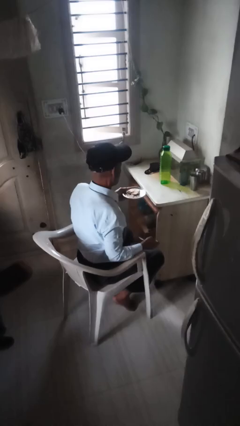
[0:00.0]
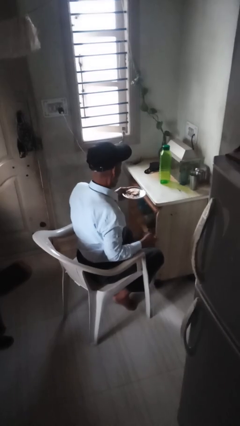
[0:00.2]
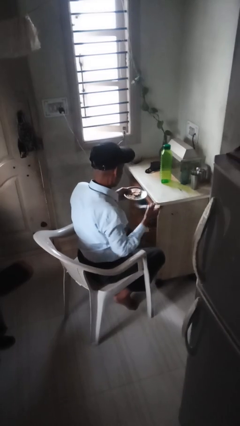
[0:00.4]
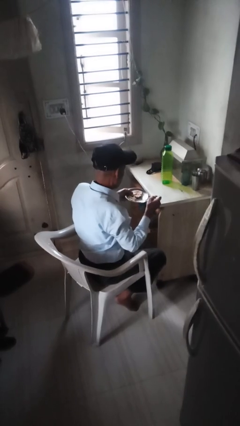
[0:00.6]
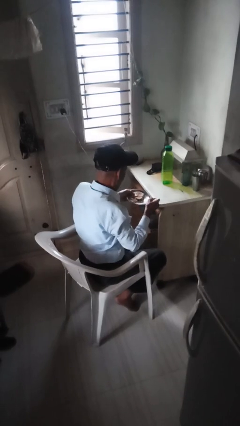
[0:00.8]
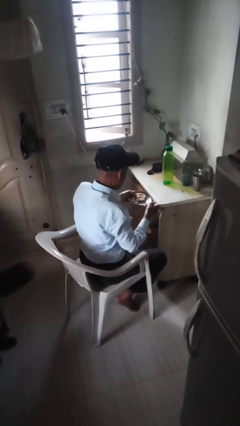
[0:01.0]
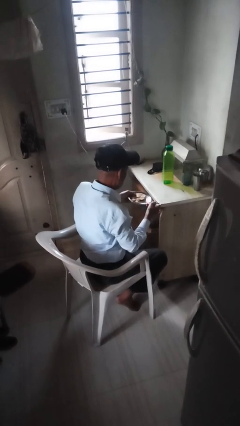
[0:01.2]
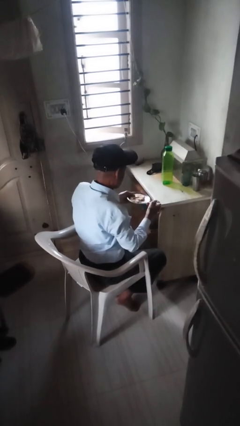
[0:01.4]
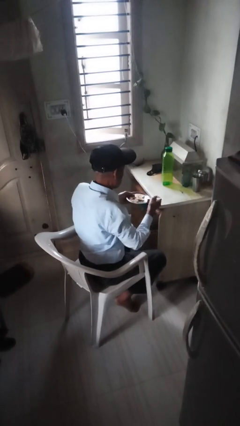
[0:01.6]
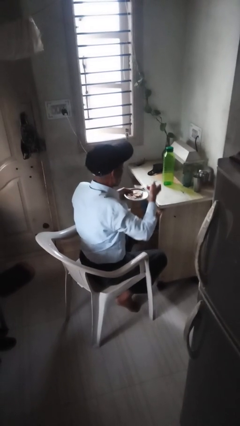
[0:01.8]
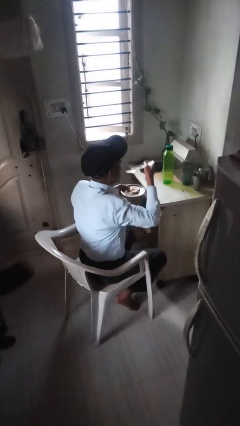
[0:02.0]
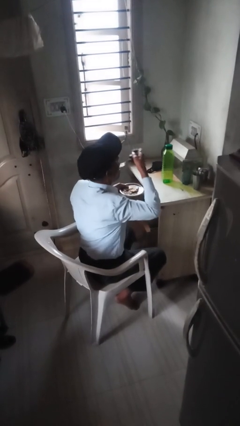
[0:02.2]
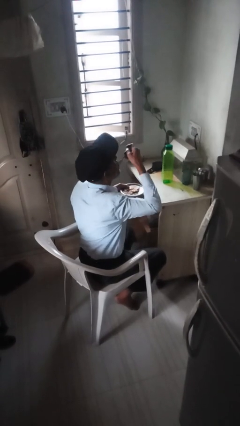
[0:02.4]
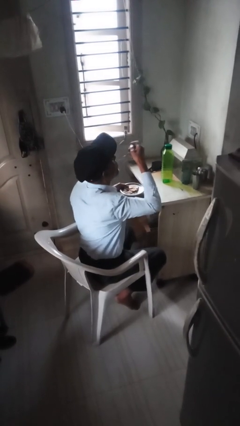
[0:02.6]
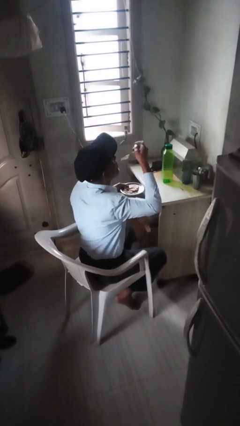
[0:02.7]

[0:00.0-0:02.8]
person eats with utensil

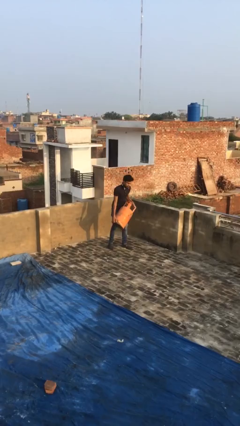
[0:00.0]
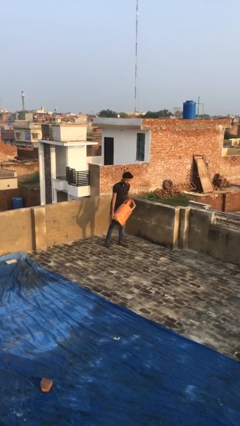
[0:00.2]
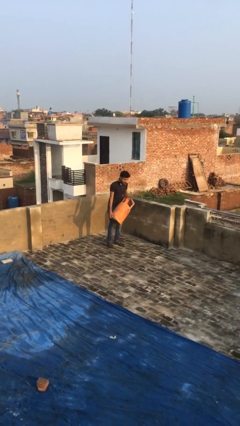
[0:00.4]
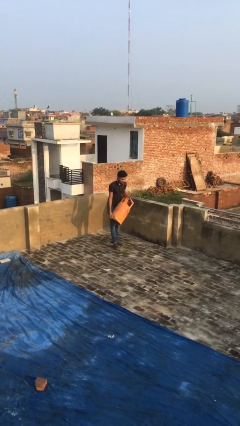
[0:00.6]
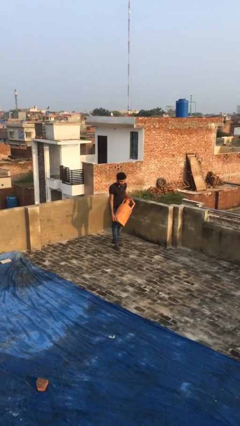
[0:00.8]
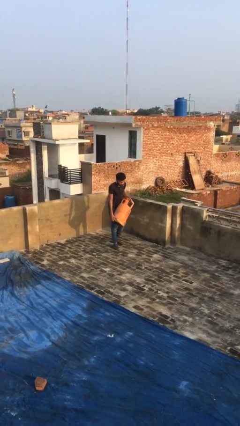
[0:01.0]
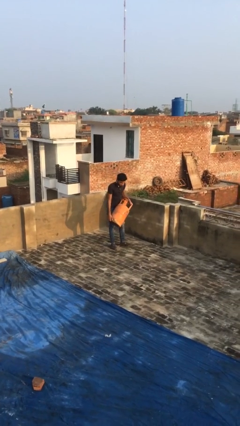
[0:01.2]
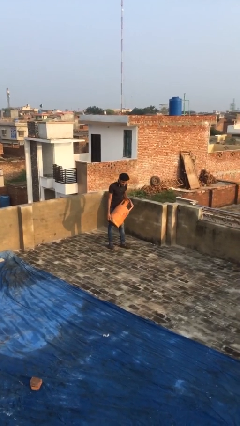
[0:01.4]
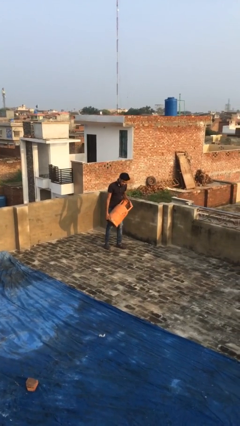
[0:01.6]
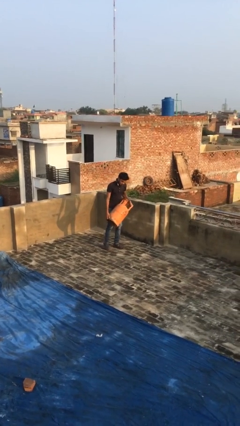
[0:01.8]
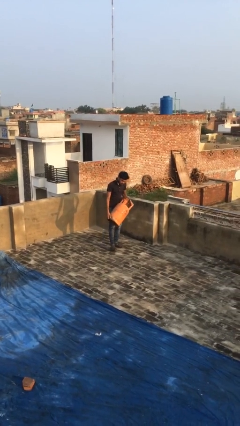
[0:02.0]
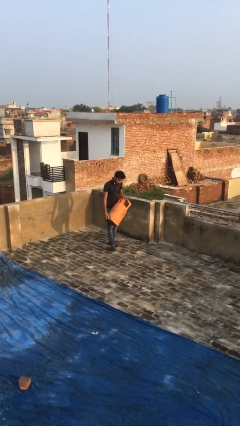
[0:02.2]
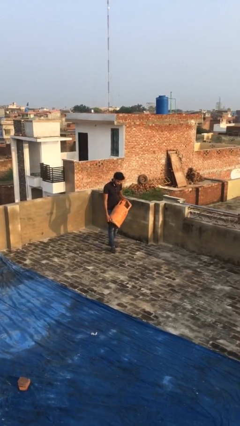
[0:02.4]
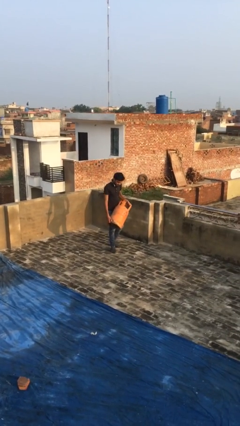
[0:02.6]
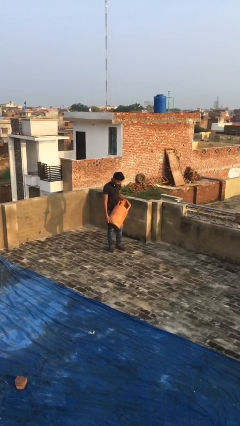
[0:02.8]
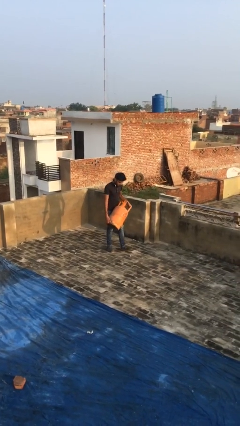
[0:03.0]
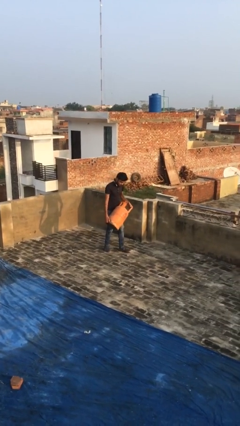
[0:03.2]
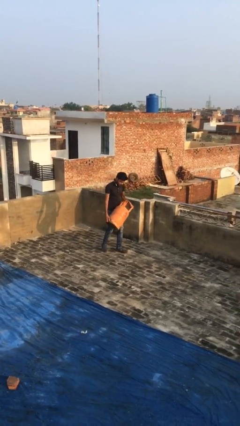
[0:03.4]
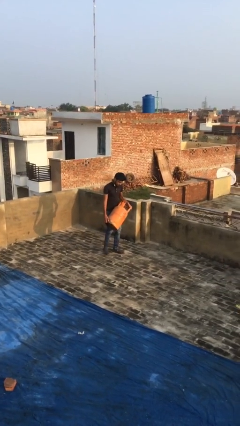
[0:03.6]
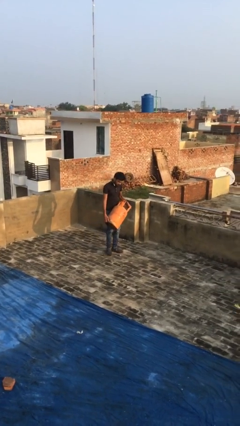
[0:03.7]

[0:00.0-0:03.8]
person carries heavy object

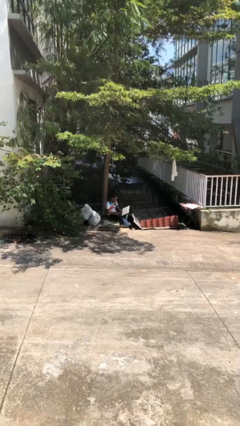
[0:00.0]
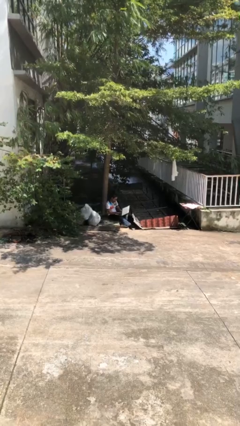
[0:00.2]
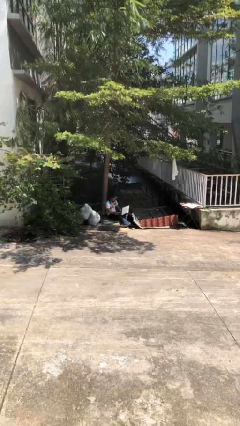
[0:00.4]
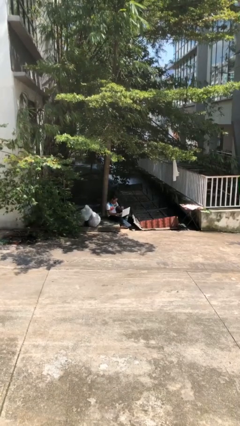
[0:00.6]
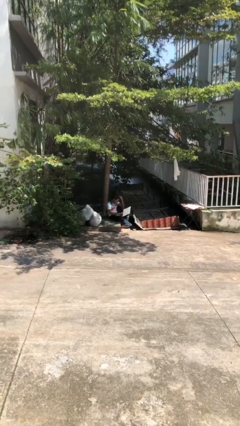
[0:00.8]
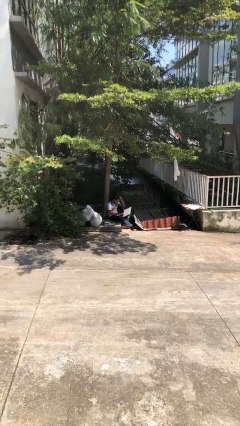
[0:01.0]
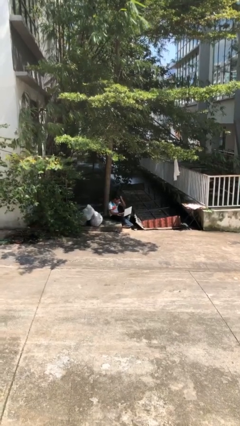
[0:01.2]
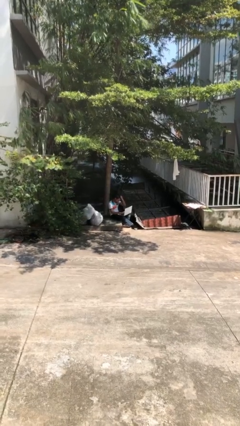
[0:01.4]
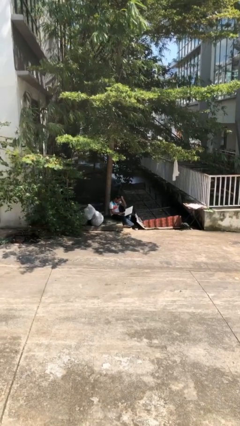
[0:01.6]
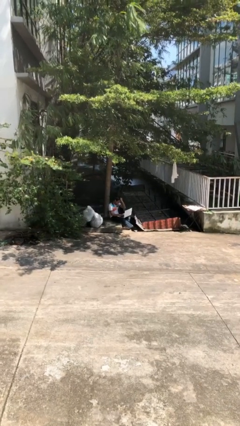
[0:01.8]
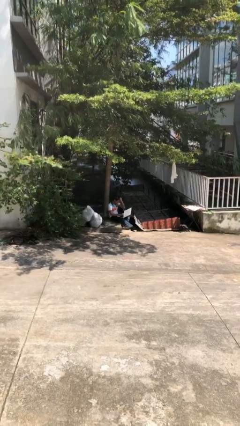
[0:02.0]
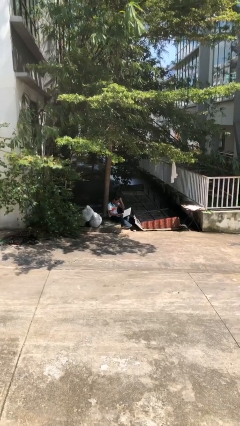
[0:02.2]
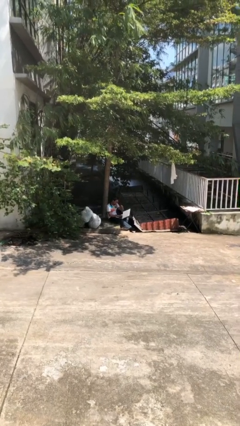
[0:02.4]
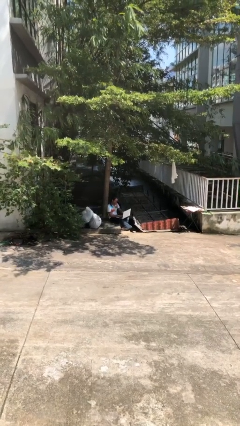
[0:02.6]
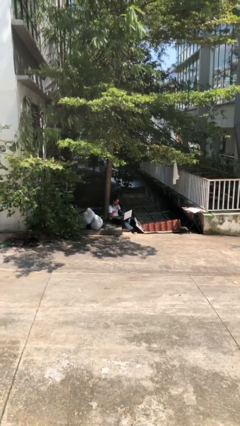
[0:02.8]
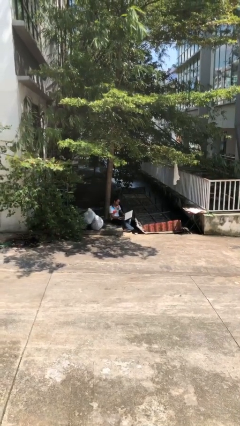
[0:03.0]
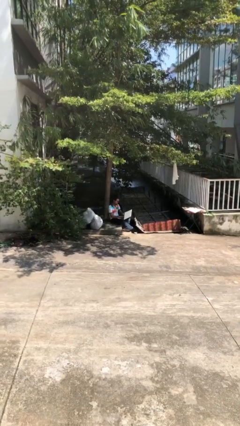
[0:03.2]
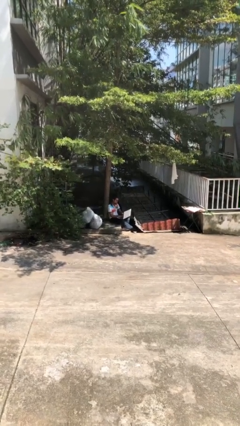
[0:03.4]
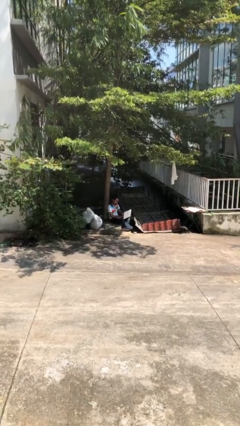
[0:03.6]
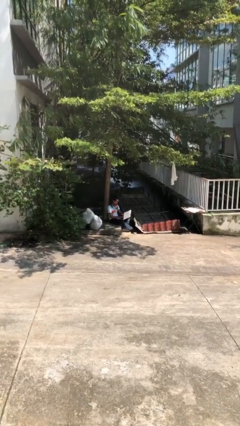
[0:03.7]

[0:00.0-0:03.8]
person interacts with laptop

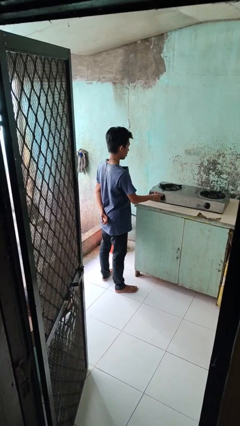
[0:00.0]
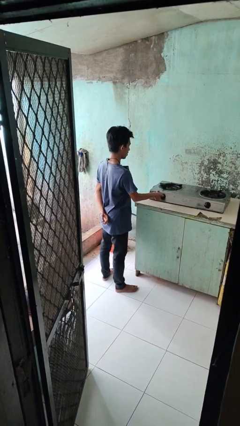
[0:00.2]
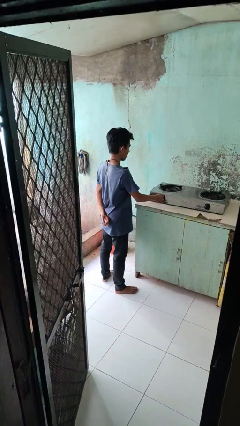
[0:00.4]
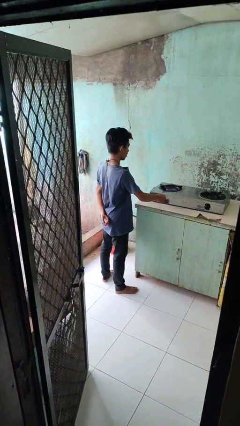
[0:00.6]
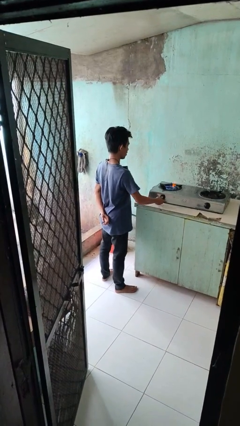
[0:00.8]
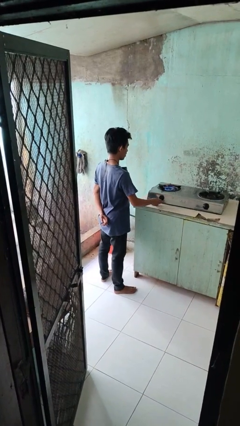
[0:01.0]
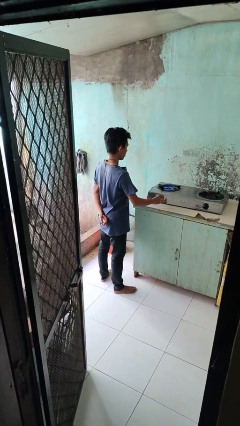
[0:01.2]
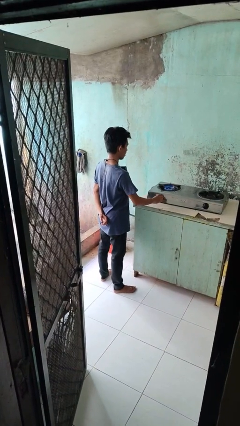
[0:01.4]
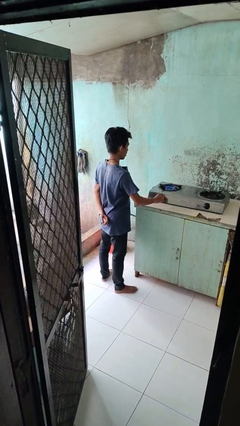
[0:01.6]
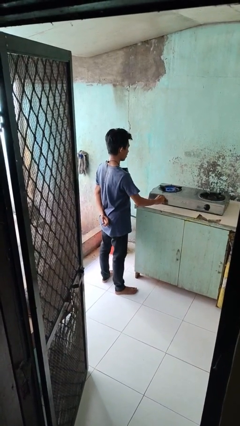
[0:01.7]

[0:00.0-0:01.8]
person turns on stovetop

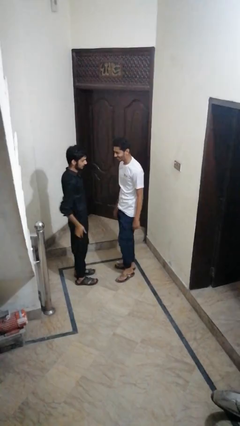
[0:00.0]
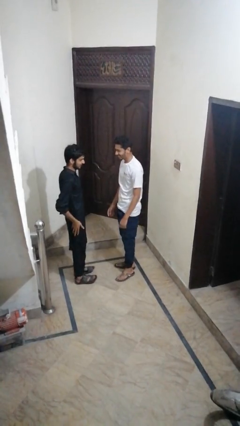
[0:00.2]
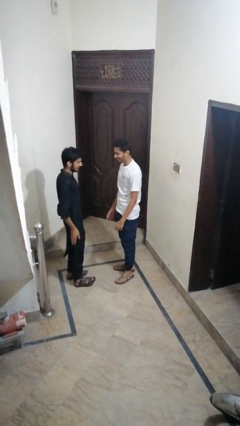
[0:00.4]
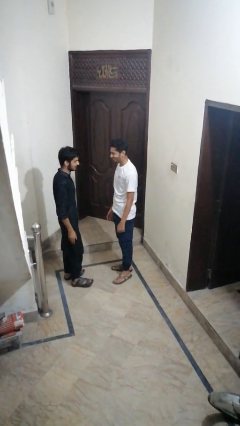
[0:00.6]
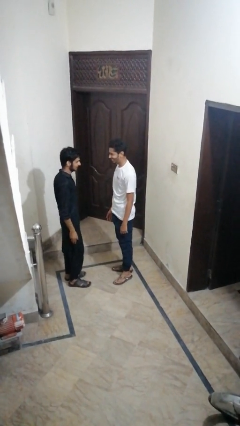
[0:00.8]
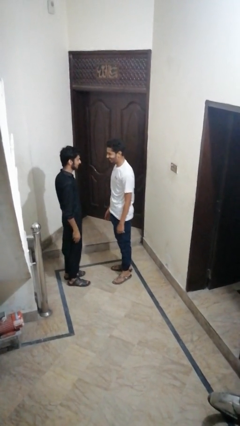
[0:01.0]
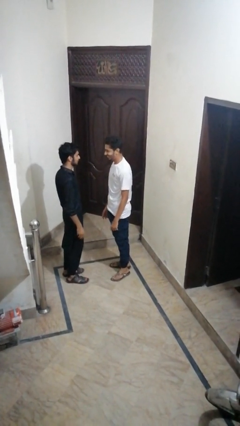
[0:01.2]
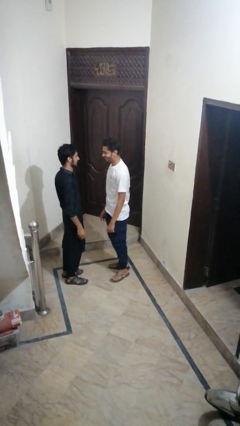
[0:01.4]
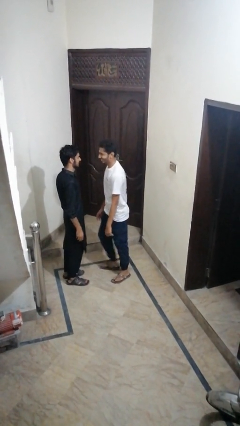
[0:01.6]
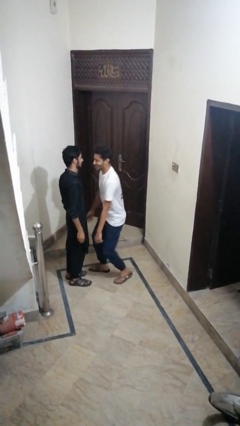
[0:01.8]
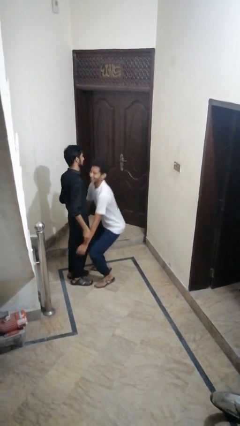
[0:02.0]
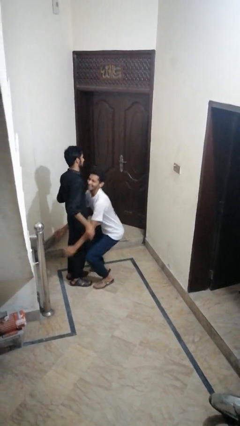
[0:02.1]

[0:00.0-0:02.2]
person puts on facemask

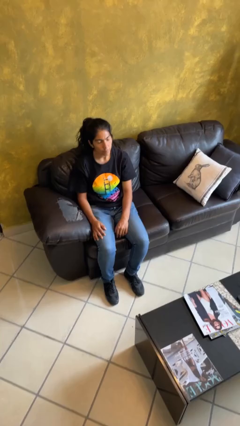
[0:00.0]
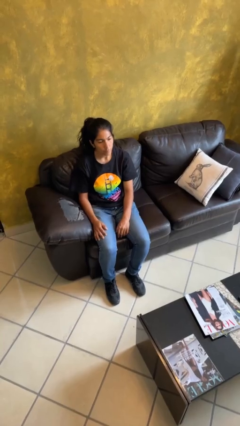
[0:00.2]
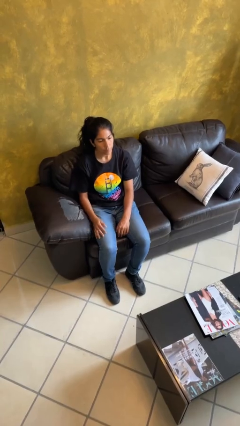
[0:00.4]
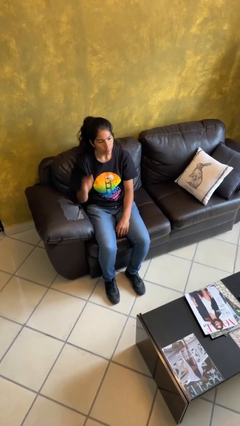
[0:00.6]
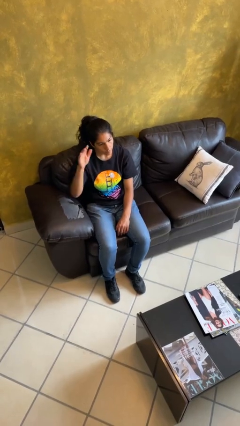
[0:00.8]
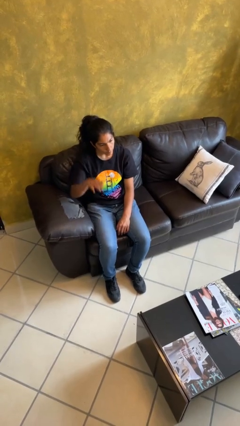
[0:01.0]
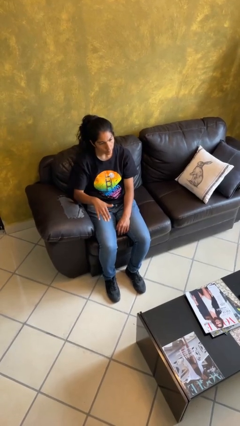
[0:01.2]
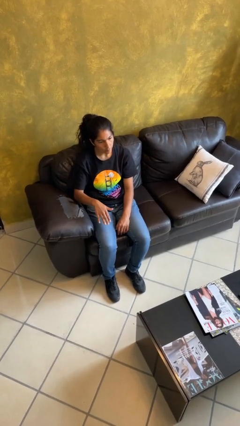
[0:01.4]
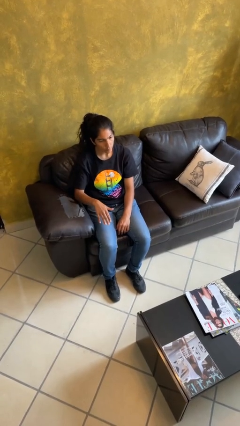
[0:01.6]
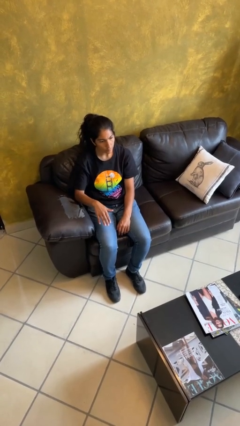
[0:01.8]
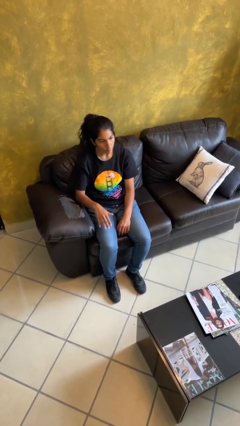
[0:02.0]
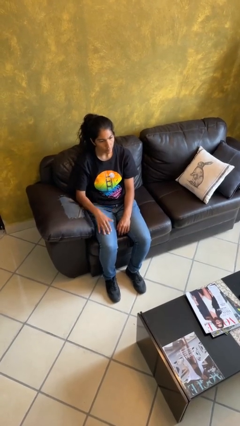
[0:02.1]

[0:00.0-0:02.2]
person gestures swipe down

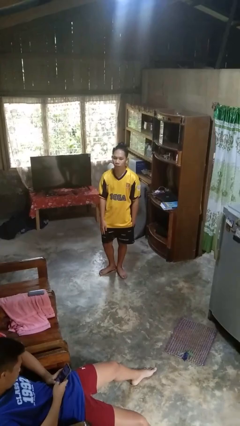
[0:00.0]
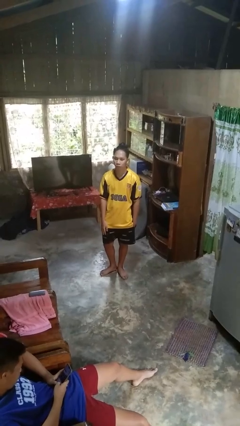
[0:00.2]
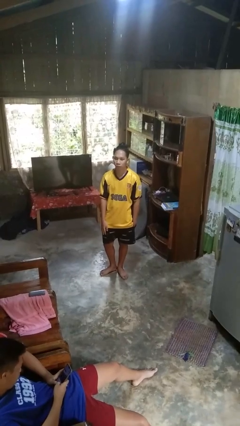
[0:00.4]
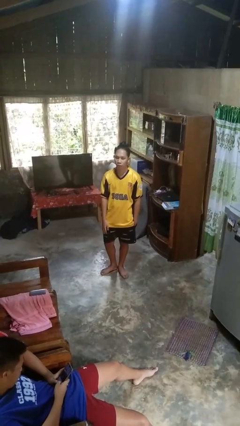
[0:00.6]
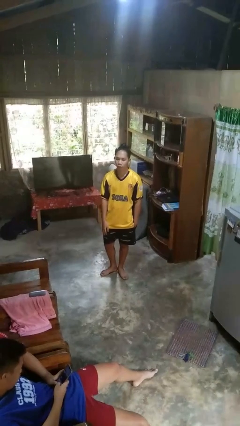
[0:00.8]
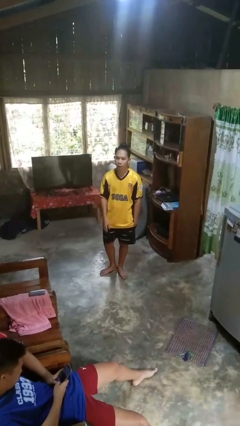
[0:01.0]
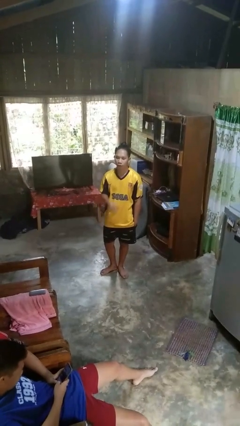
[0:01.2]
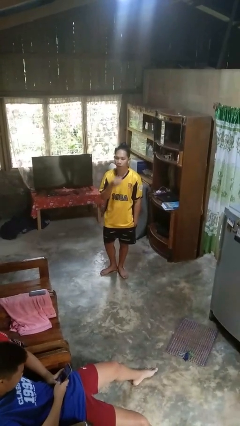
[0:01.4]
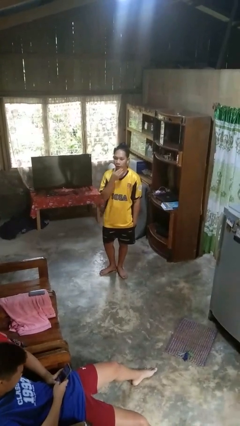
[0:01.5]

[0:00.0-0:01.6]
person strokes chin
